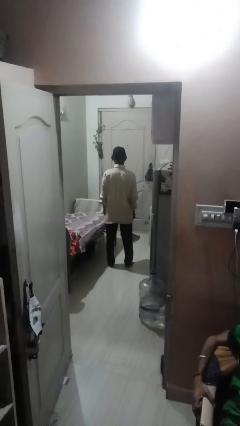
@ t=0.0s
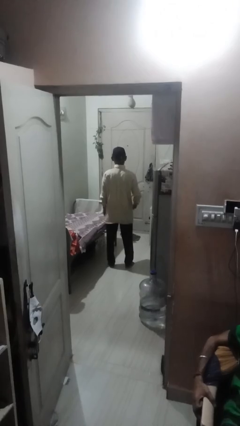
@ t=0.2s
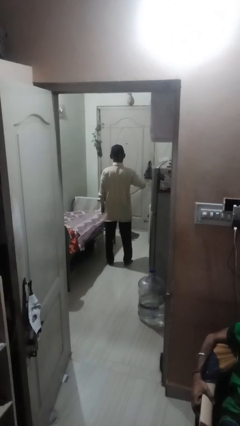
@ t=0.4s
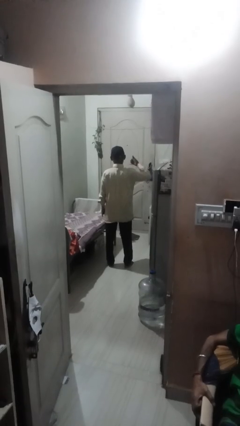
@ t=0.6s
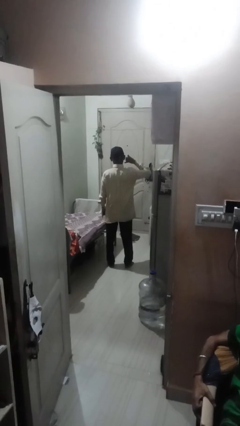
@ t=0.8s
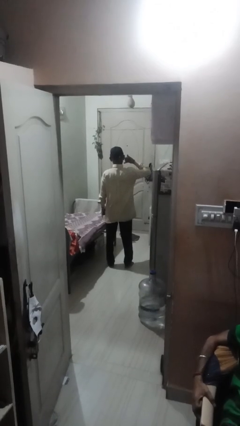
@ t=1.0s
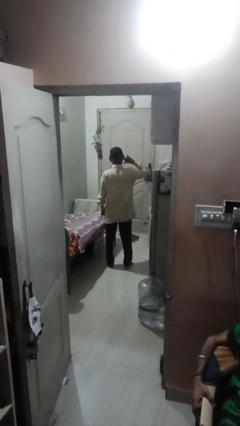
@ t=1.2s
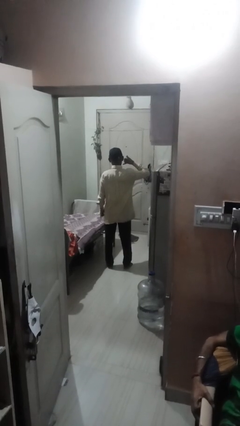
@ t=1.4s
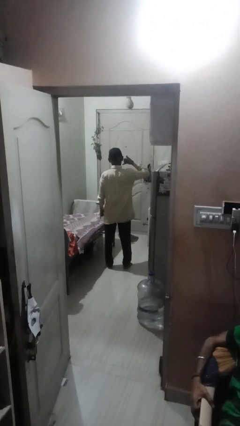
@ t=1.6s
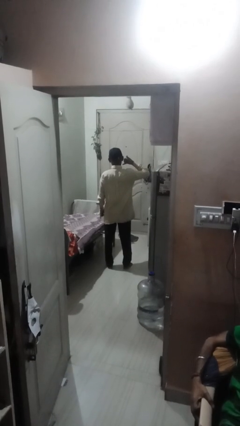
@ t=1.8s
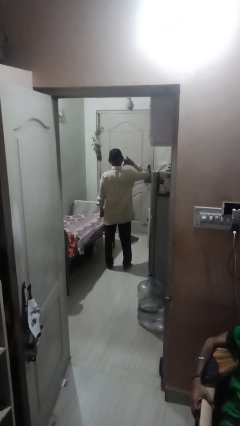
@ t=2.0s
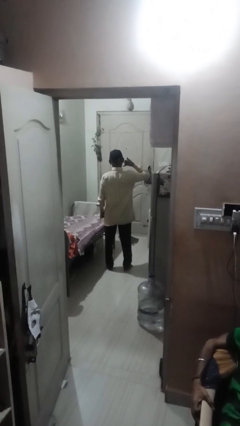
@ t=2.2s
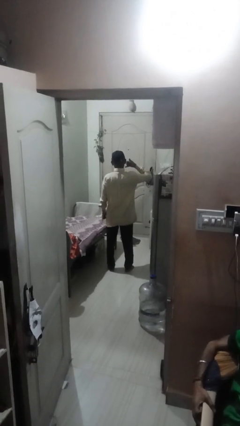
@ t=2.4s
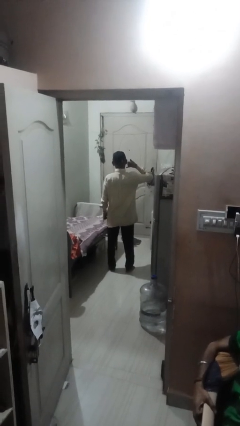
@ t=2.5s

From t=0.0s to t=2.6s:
person gestures call me

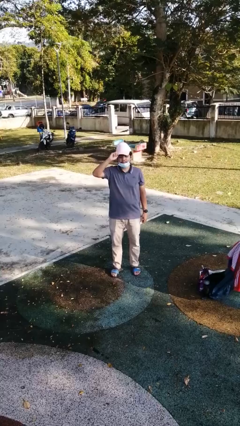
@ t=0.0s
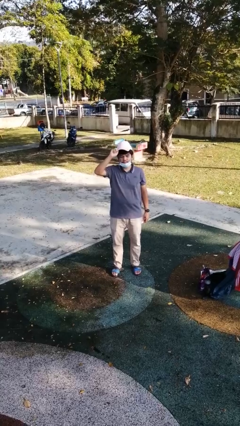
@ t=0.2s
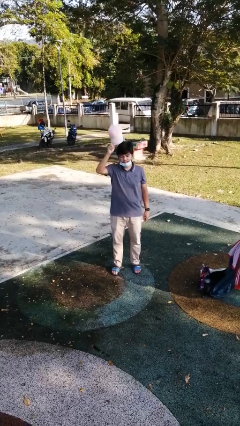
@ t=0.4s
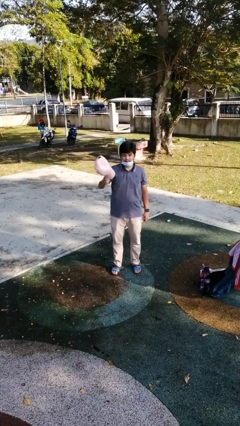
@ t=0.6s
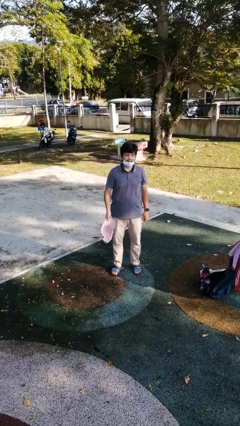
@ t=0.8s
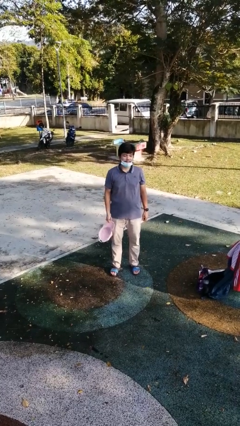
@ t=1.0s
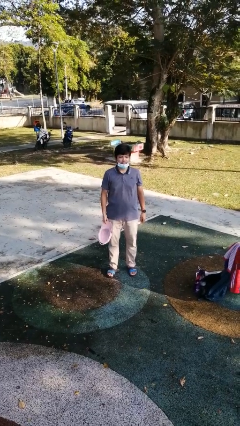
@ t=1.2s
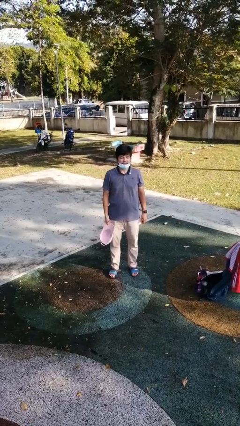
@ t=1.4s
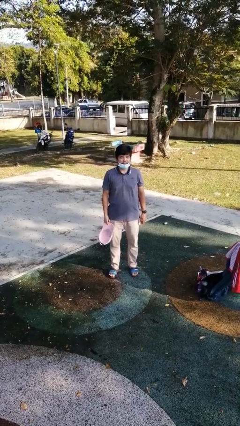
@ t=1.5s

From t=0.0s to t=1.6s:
person takes off hat

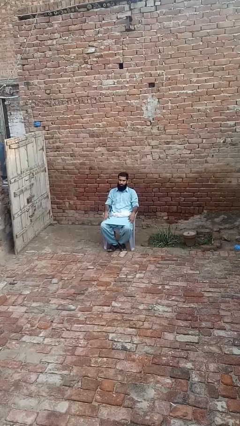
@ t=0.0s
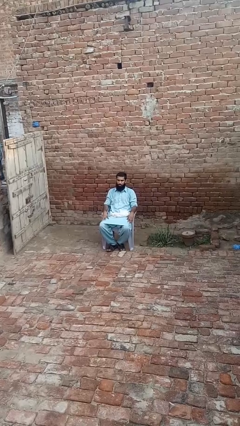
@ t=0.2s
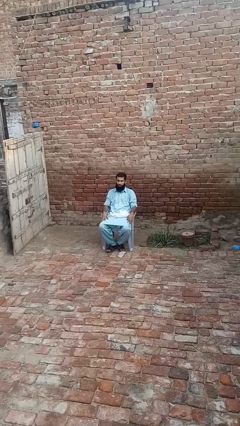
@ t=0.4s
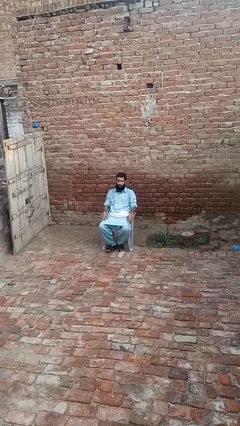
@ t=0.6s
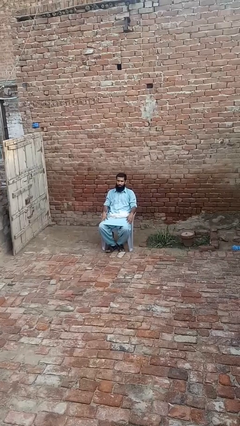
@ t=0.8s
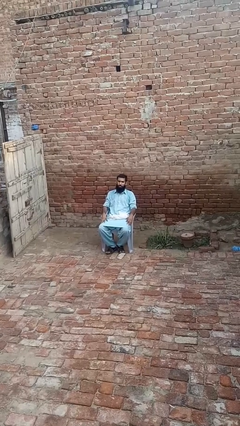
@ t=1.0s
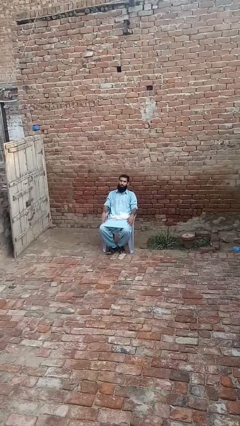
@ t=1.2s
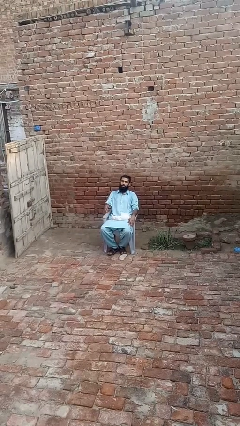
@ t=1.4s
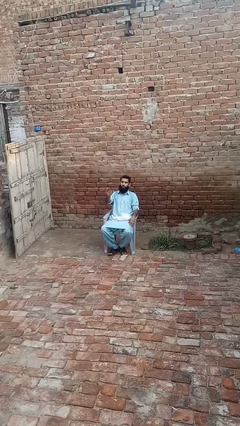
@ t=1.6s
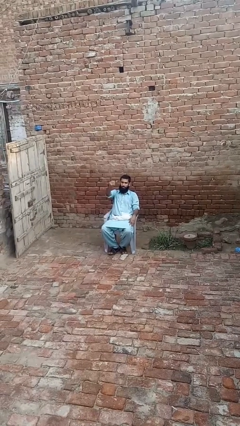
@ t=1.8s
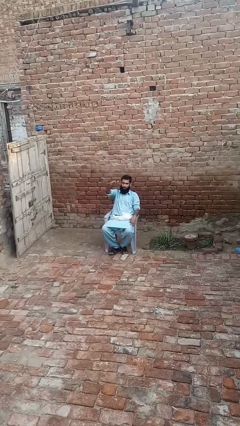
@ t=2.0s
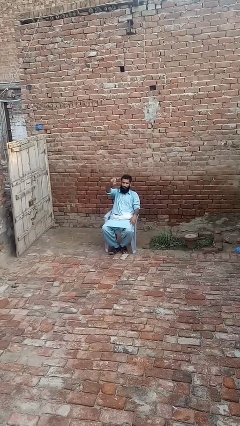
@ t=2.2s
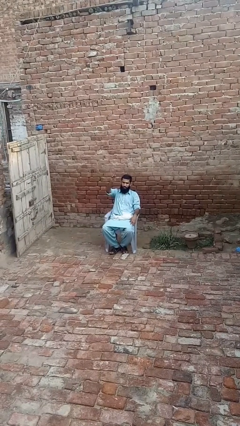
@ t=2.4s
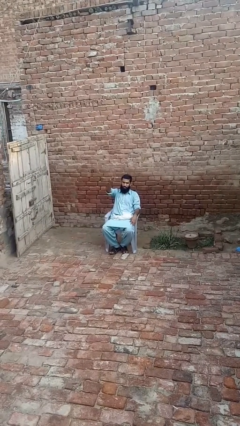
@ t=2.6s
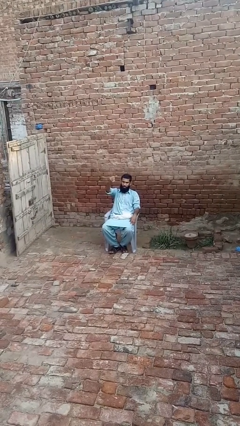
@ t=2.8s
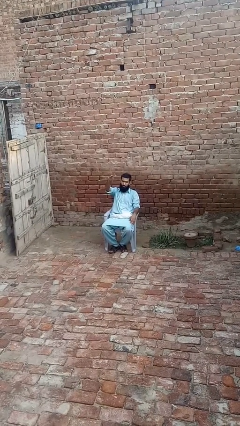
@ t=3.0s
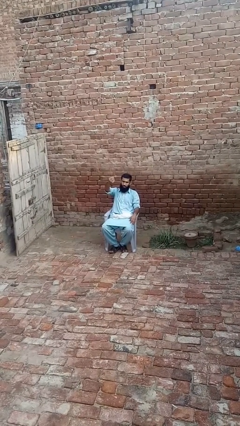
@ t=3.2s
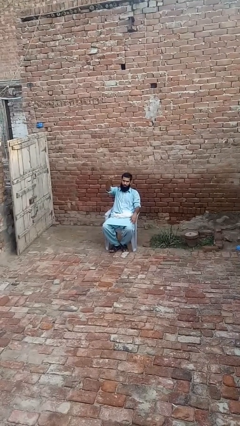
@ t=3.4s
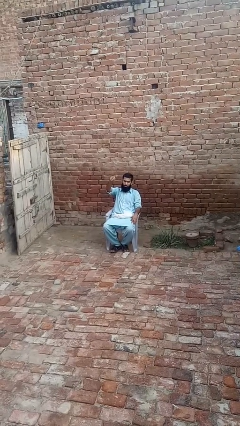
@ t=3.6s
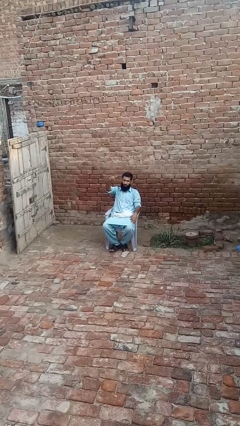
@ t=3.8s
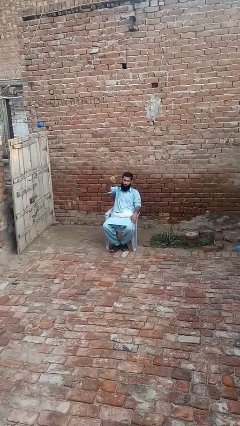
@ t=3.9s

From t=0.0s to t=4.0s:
person gestures come here

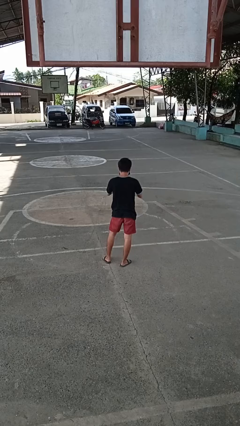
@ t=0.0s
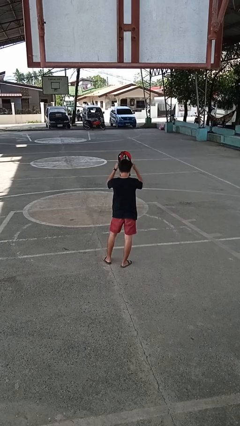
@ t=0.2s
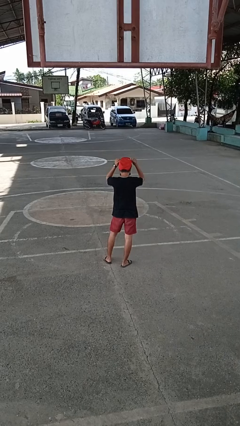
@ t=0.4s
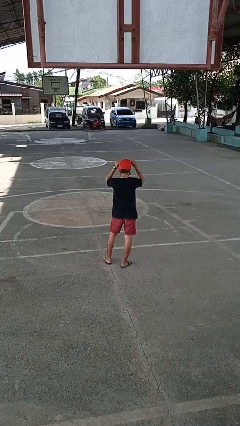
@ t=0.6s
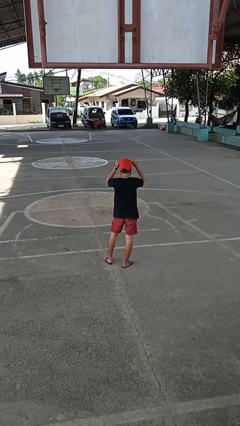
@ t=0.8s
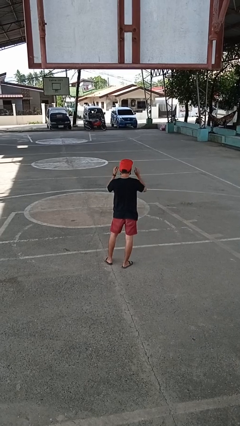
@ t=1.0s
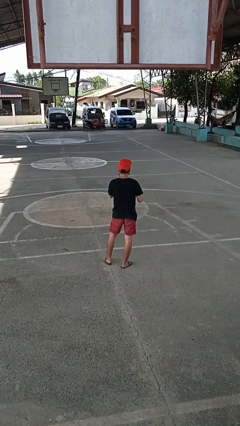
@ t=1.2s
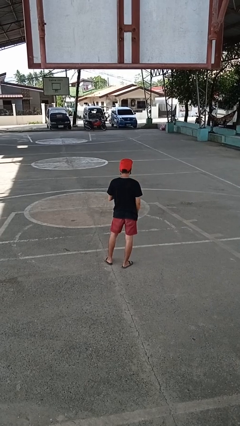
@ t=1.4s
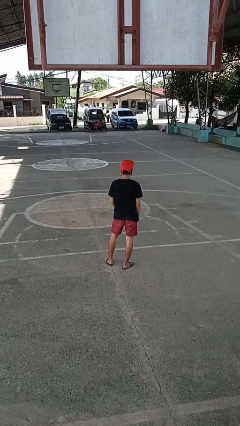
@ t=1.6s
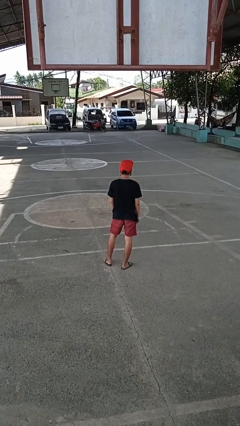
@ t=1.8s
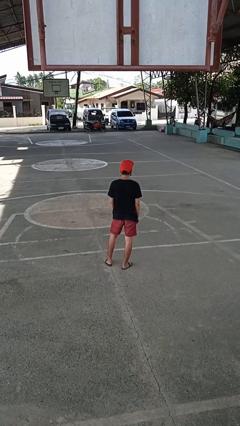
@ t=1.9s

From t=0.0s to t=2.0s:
person puts on hat

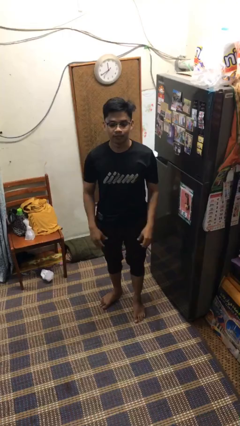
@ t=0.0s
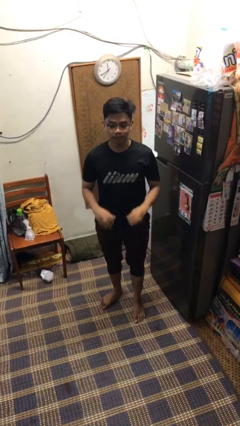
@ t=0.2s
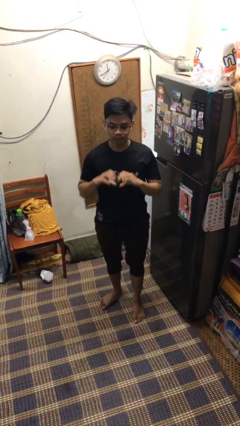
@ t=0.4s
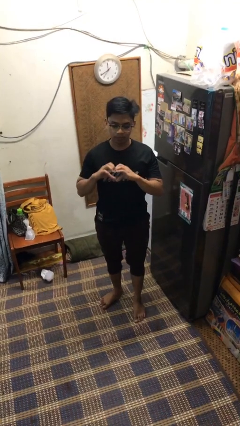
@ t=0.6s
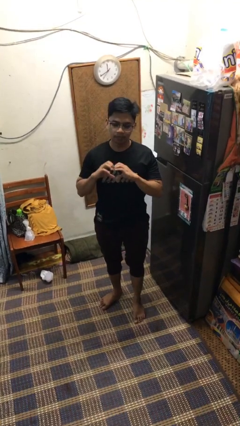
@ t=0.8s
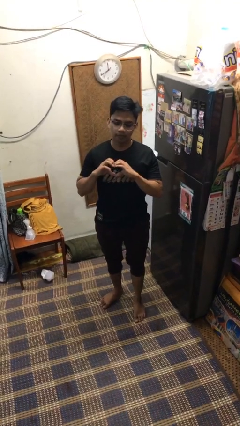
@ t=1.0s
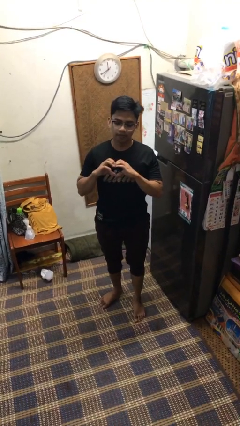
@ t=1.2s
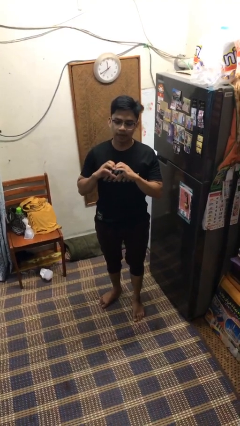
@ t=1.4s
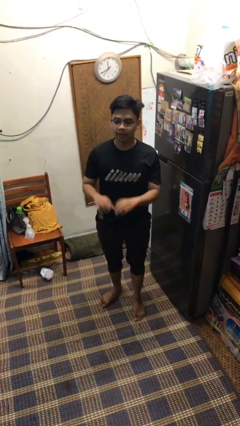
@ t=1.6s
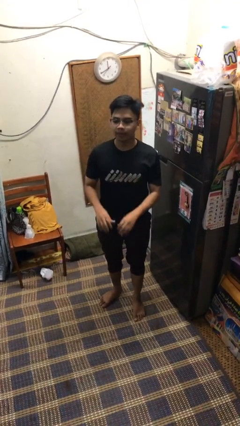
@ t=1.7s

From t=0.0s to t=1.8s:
person gestures heart

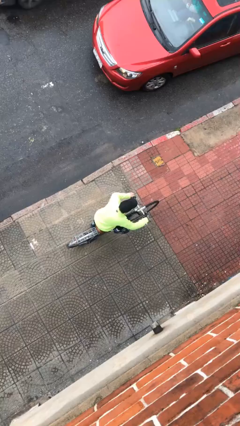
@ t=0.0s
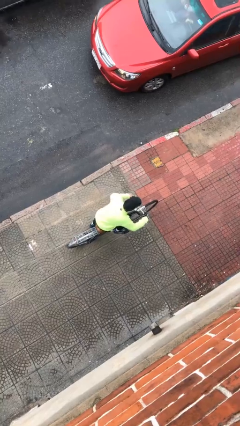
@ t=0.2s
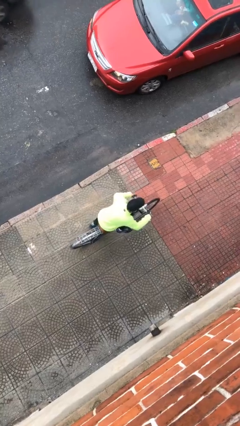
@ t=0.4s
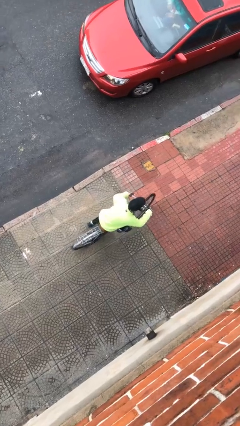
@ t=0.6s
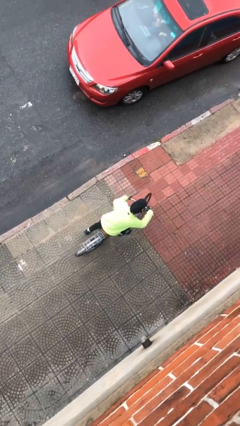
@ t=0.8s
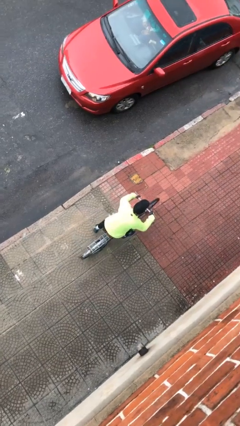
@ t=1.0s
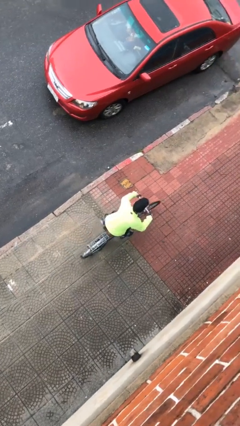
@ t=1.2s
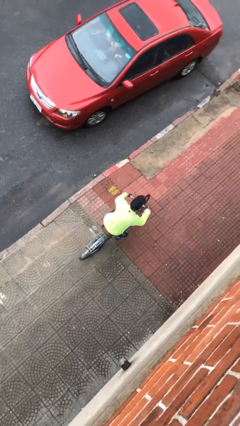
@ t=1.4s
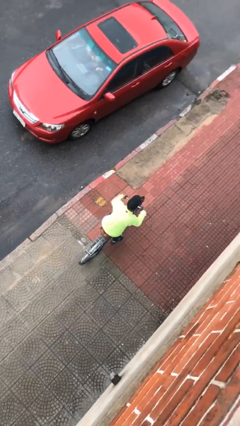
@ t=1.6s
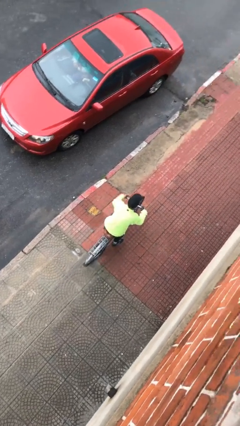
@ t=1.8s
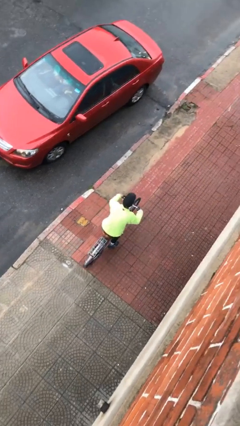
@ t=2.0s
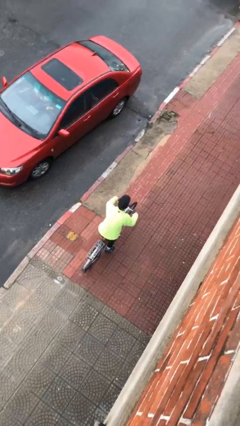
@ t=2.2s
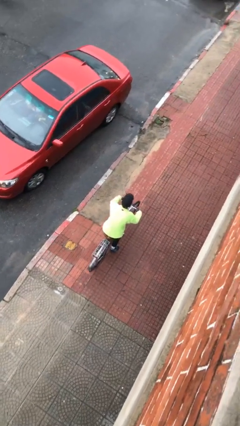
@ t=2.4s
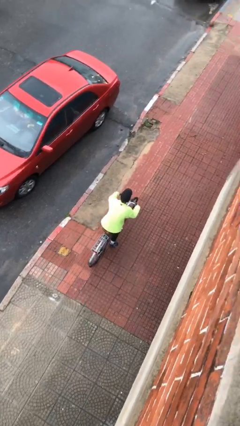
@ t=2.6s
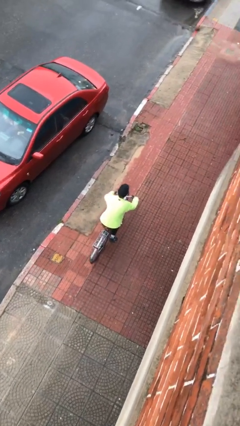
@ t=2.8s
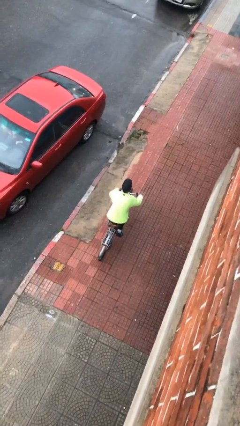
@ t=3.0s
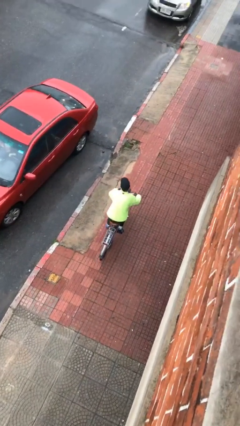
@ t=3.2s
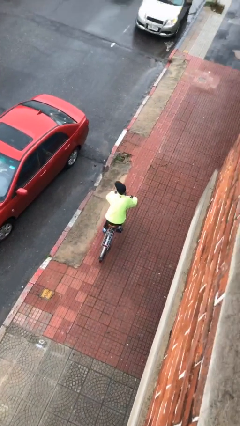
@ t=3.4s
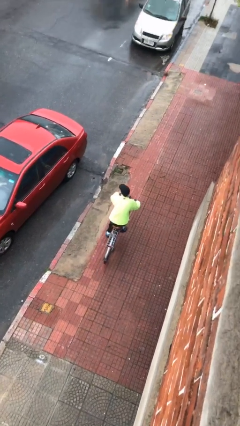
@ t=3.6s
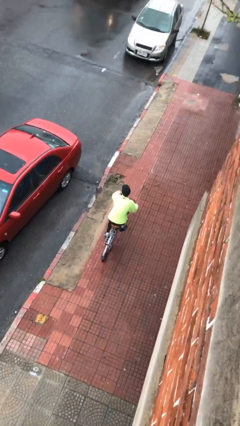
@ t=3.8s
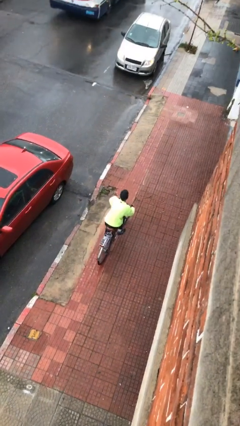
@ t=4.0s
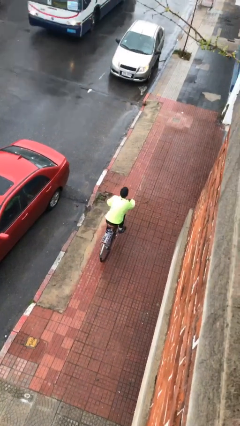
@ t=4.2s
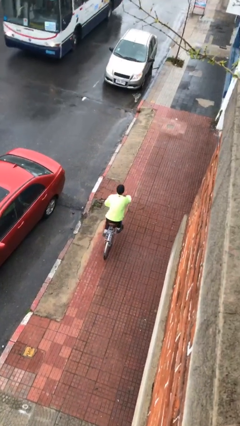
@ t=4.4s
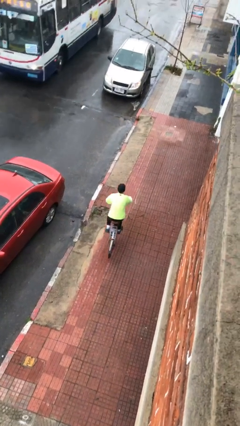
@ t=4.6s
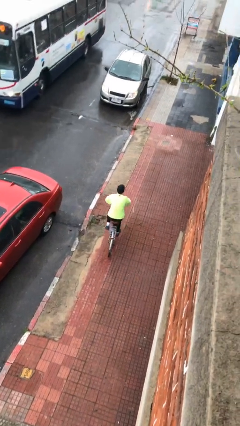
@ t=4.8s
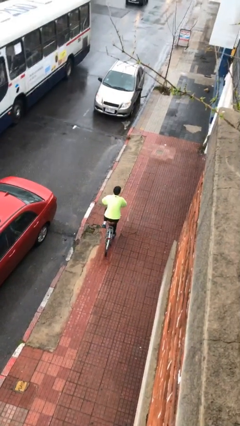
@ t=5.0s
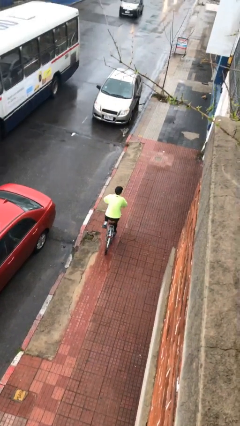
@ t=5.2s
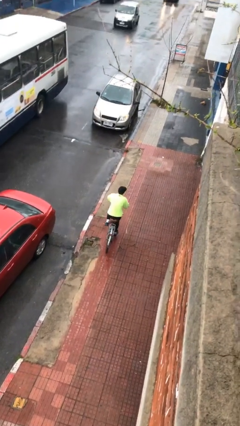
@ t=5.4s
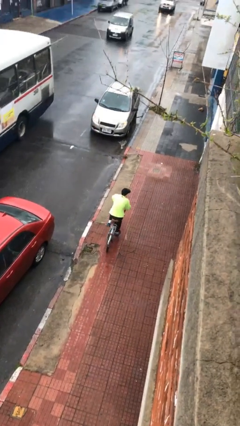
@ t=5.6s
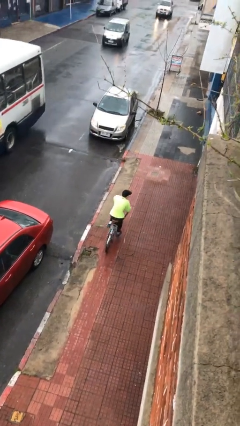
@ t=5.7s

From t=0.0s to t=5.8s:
person rides bicycle
